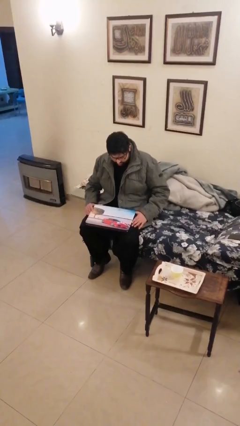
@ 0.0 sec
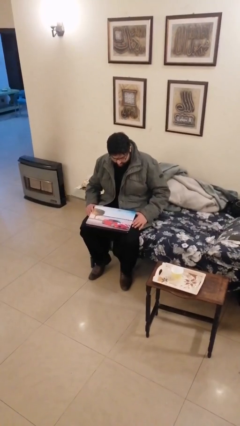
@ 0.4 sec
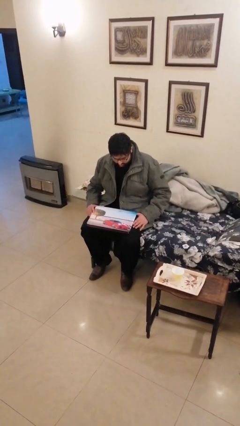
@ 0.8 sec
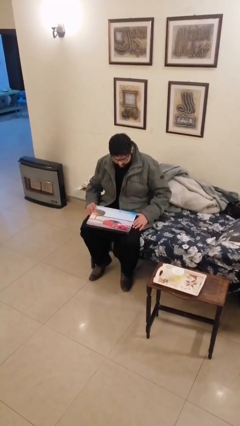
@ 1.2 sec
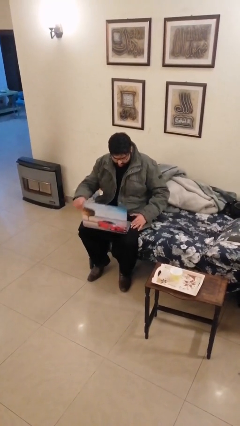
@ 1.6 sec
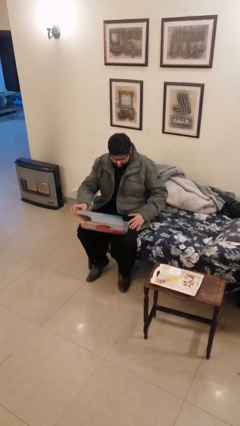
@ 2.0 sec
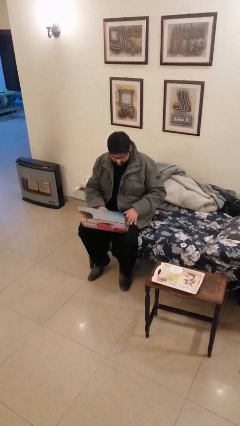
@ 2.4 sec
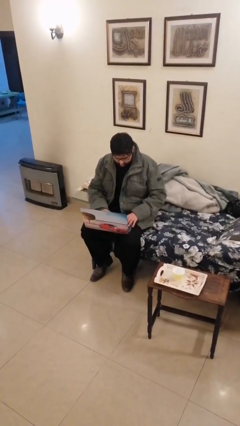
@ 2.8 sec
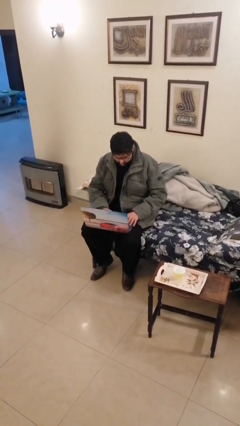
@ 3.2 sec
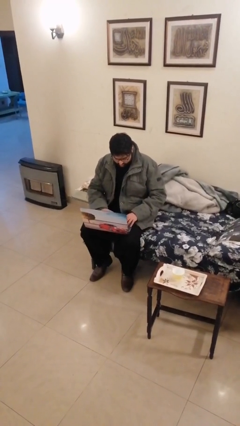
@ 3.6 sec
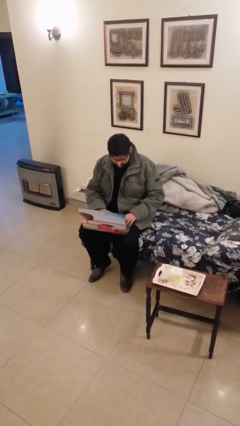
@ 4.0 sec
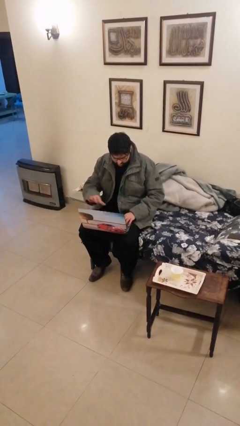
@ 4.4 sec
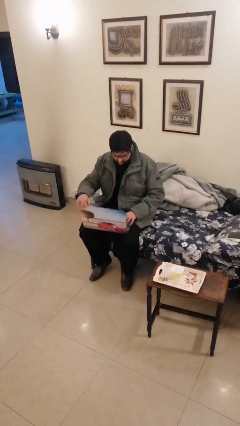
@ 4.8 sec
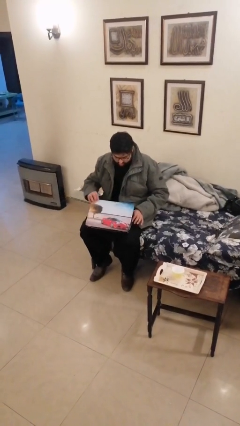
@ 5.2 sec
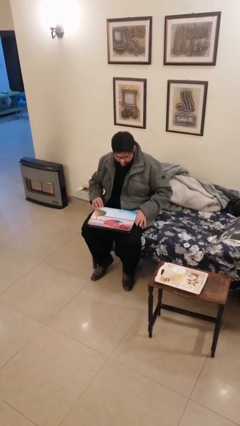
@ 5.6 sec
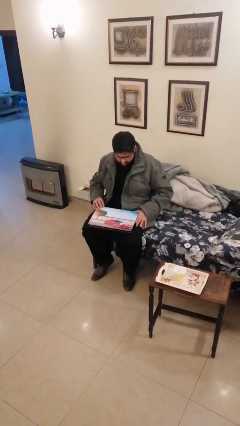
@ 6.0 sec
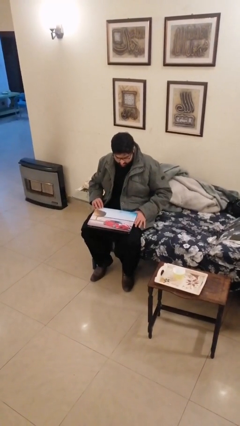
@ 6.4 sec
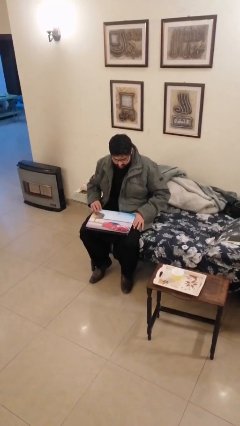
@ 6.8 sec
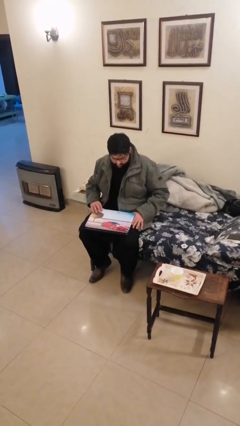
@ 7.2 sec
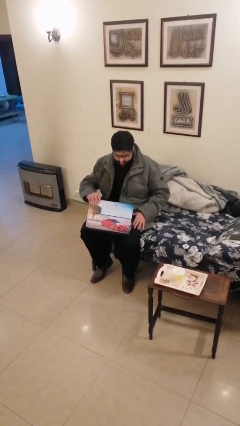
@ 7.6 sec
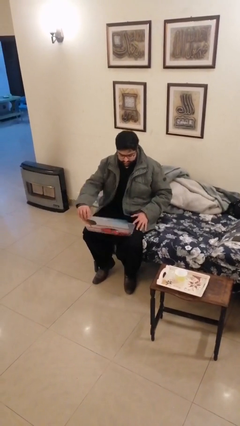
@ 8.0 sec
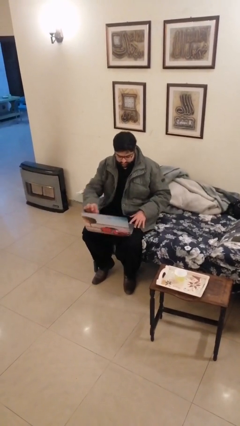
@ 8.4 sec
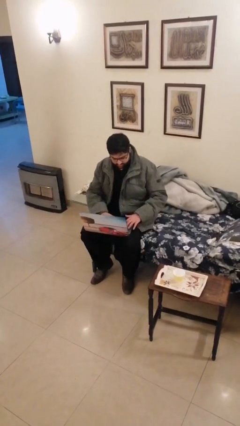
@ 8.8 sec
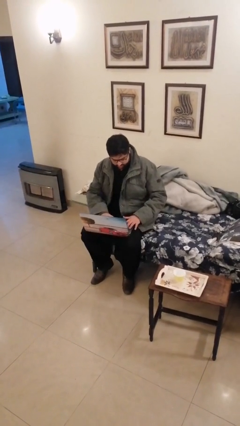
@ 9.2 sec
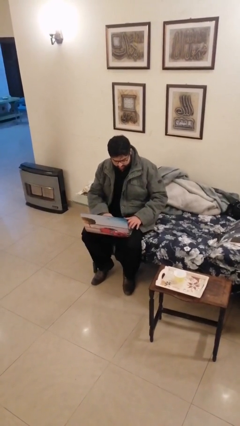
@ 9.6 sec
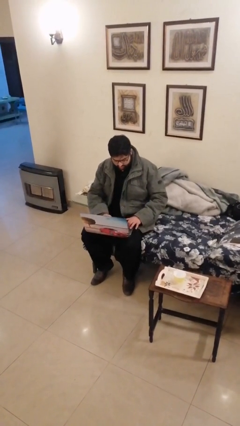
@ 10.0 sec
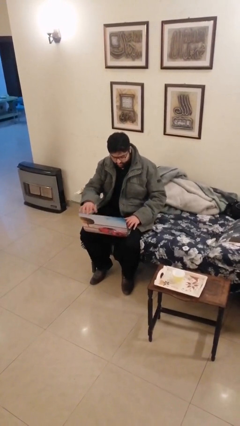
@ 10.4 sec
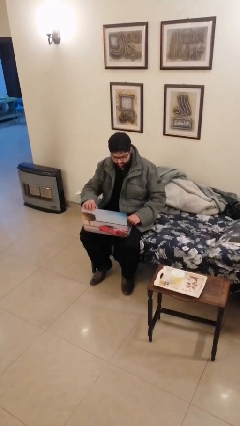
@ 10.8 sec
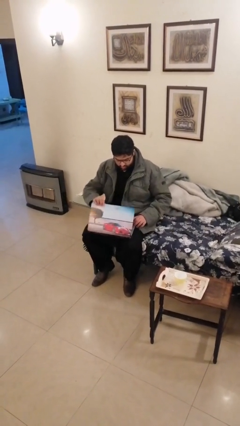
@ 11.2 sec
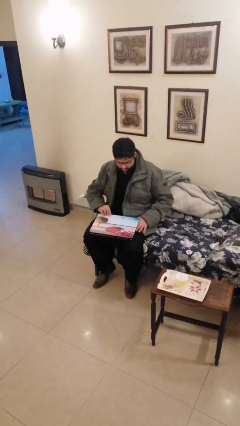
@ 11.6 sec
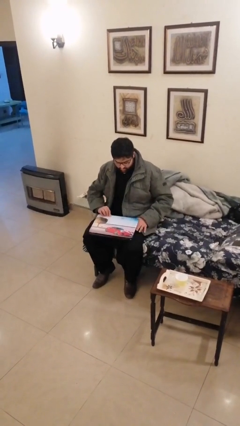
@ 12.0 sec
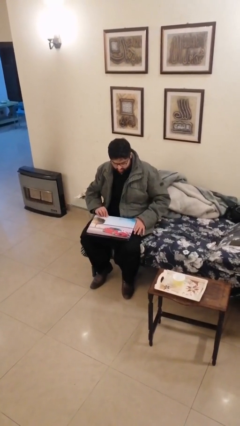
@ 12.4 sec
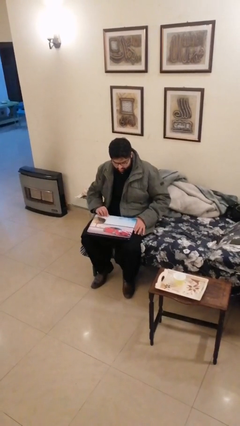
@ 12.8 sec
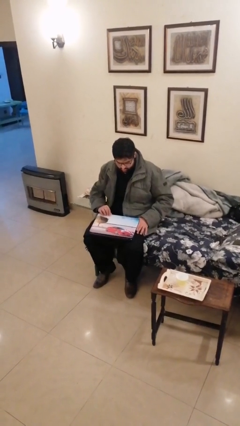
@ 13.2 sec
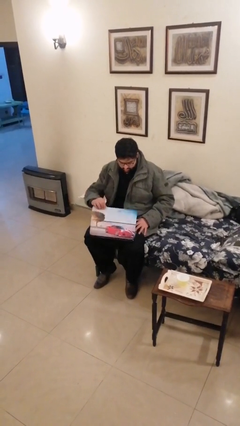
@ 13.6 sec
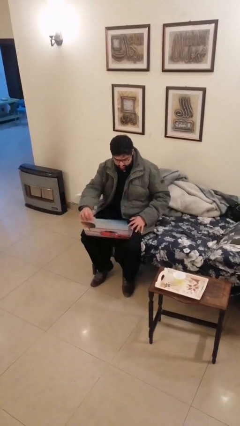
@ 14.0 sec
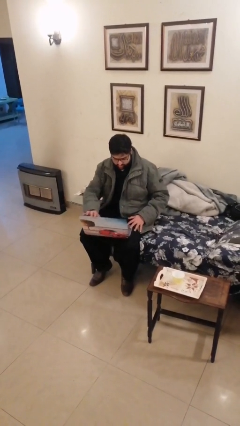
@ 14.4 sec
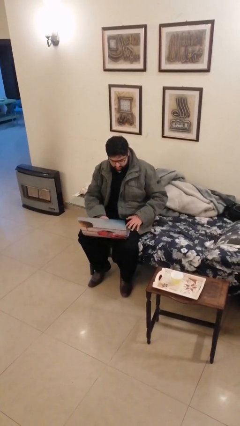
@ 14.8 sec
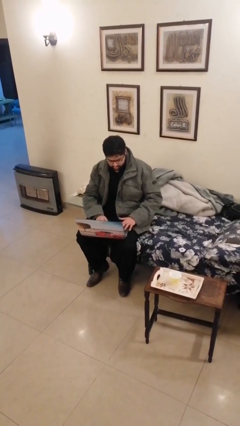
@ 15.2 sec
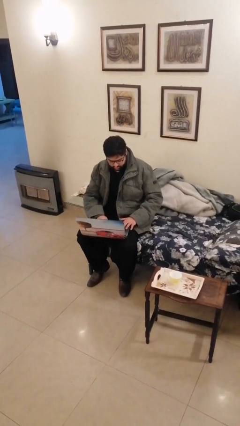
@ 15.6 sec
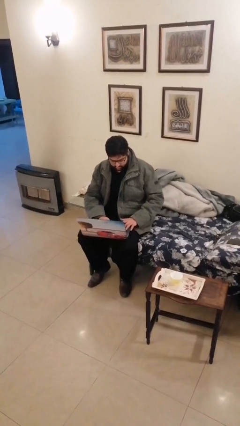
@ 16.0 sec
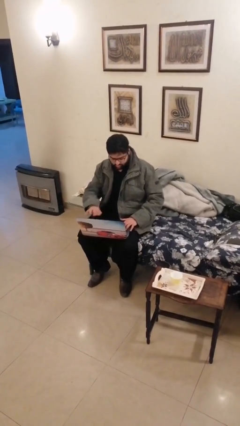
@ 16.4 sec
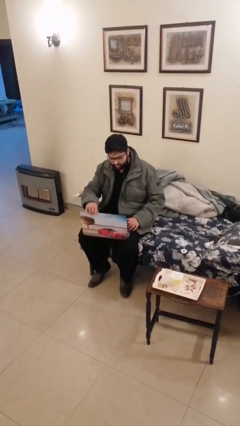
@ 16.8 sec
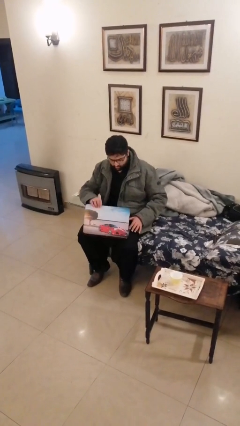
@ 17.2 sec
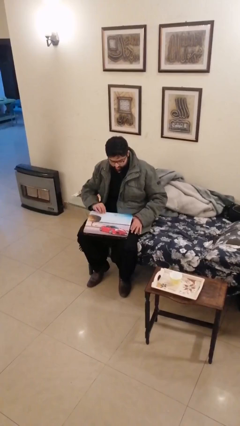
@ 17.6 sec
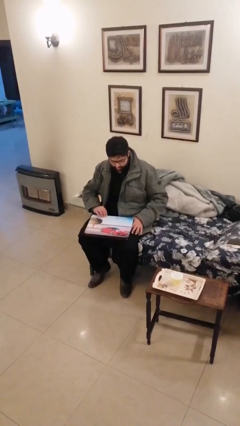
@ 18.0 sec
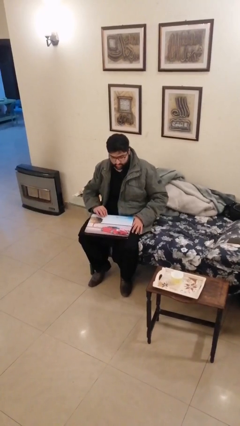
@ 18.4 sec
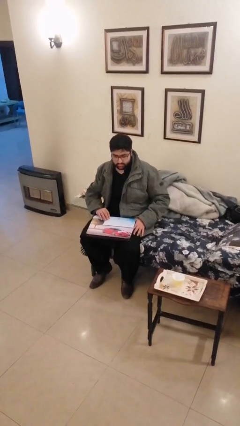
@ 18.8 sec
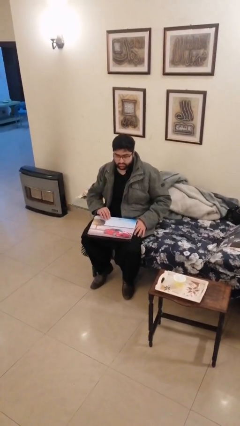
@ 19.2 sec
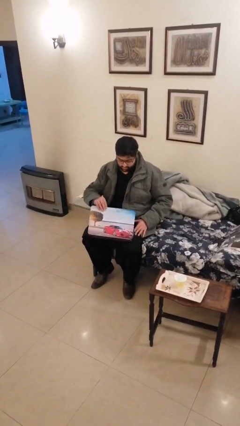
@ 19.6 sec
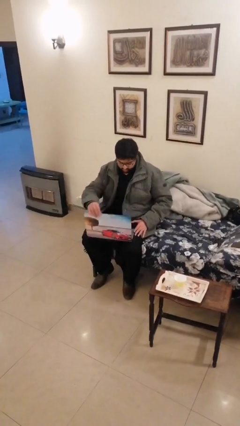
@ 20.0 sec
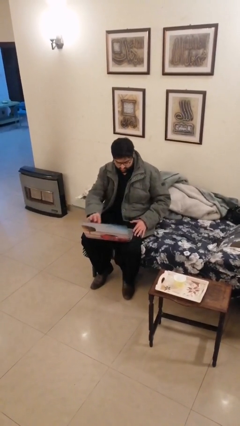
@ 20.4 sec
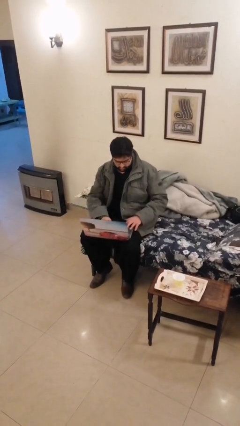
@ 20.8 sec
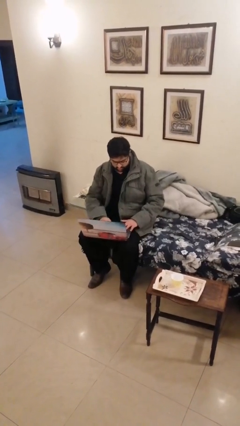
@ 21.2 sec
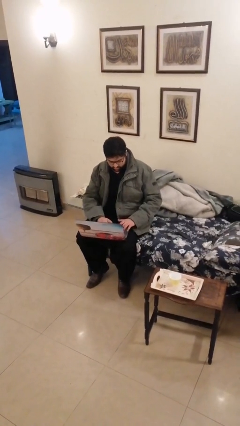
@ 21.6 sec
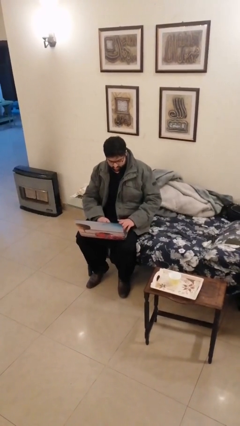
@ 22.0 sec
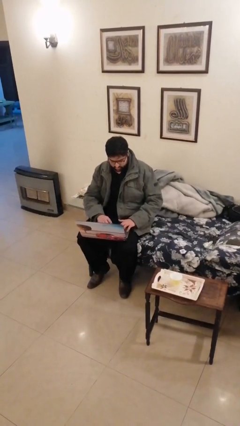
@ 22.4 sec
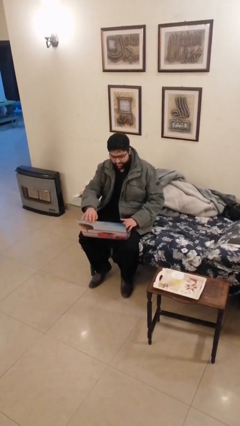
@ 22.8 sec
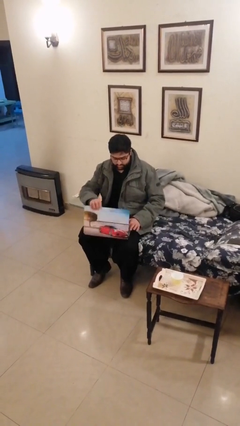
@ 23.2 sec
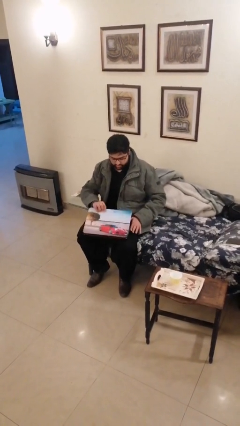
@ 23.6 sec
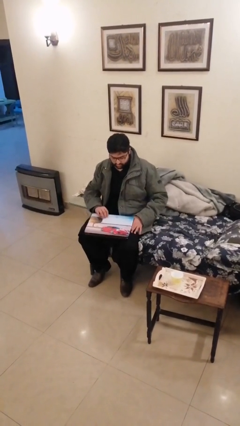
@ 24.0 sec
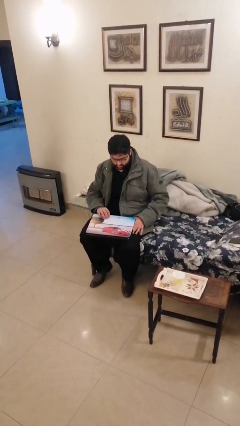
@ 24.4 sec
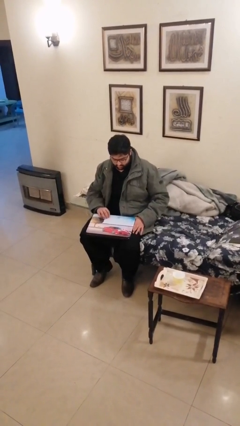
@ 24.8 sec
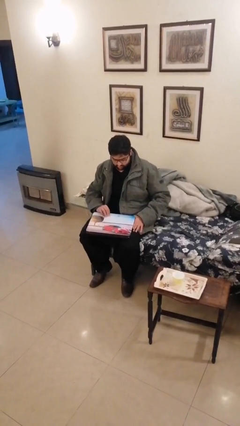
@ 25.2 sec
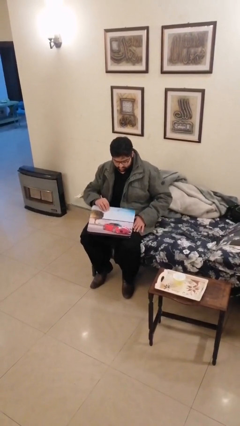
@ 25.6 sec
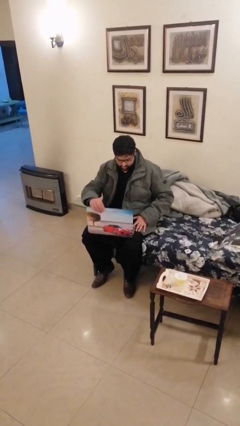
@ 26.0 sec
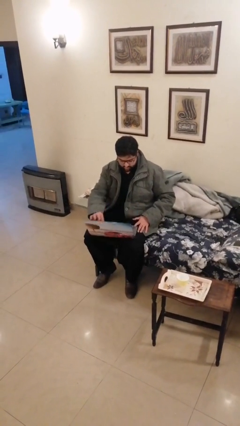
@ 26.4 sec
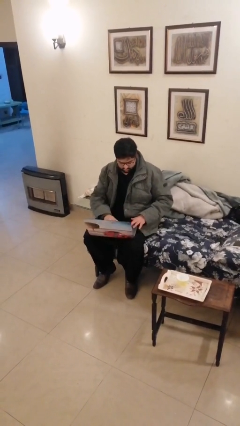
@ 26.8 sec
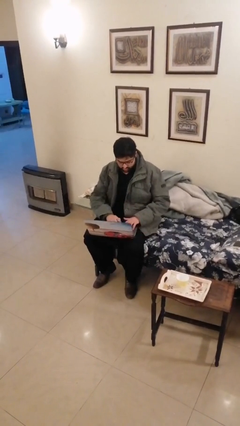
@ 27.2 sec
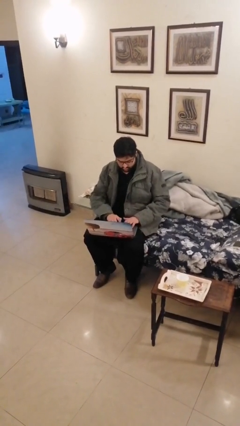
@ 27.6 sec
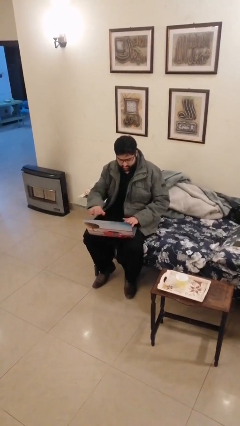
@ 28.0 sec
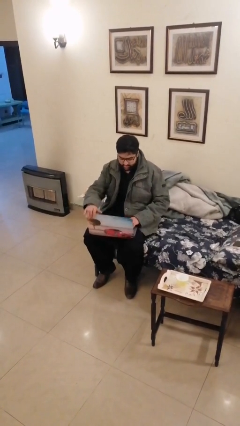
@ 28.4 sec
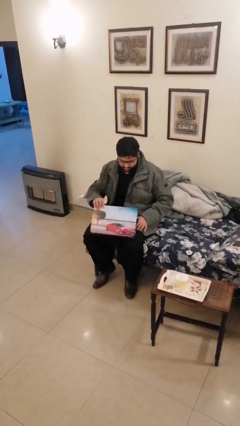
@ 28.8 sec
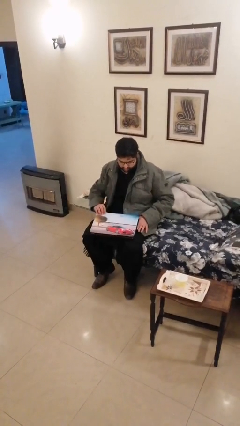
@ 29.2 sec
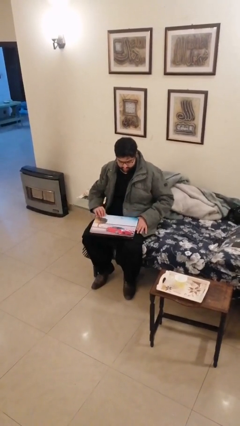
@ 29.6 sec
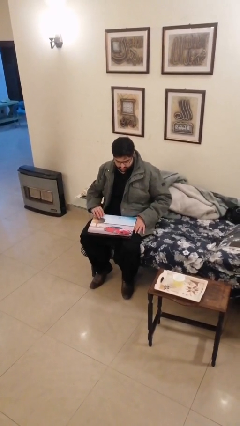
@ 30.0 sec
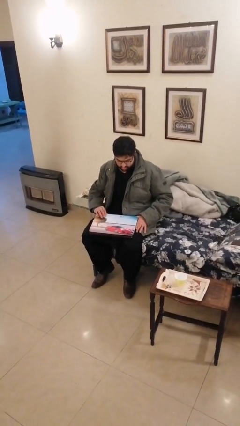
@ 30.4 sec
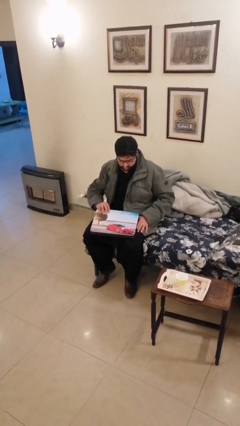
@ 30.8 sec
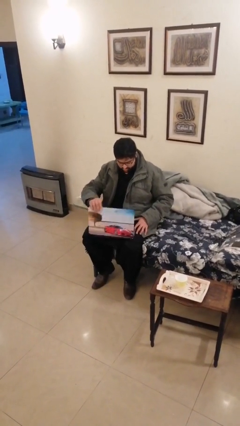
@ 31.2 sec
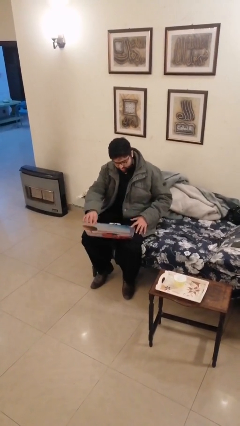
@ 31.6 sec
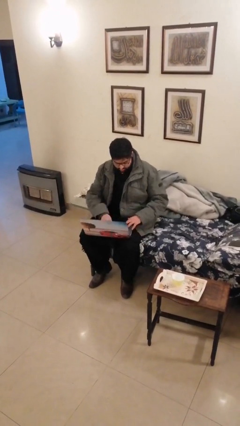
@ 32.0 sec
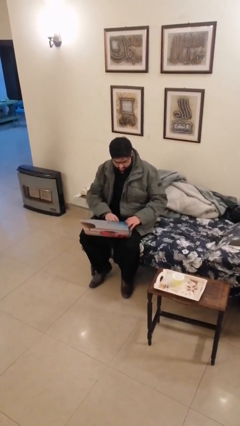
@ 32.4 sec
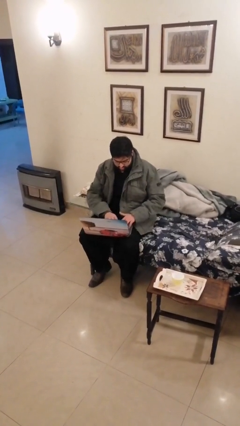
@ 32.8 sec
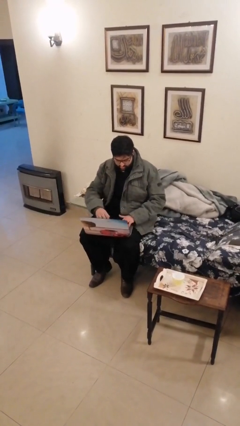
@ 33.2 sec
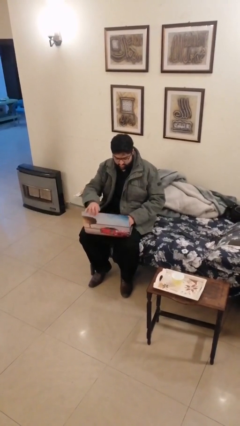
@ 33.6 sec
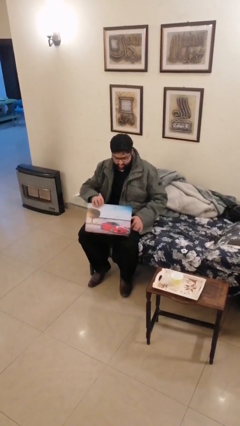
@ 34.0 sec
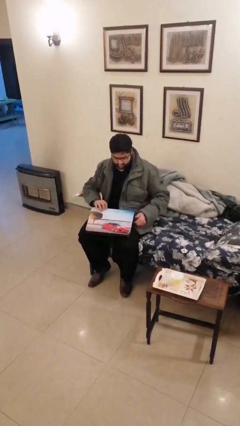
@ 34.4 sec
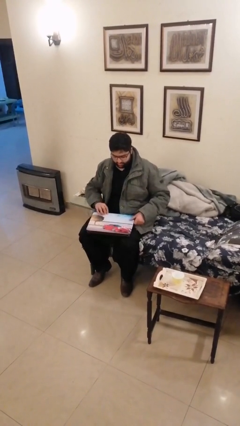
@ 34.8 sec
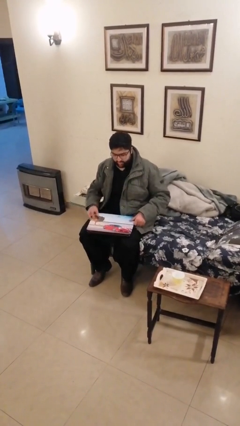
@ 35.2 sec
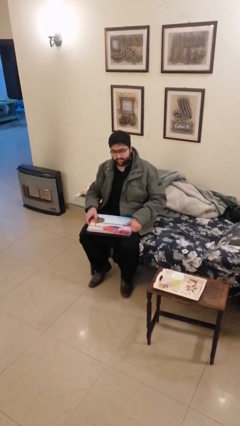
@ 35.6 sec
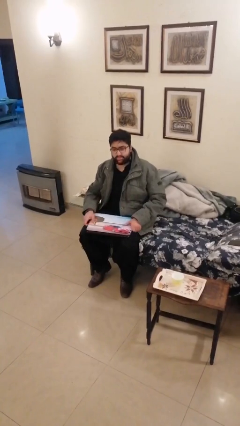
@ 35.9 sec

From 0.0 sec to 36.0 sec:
person interacts with laptop
